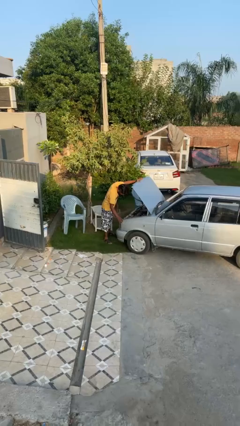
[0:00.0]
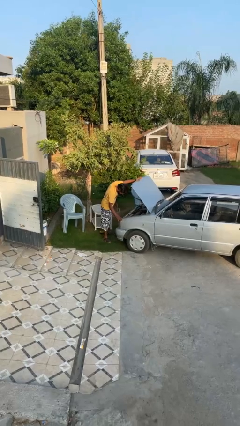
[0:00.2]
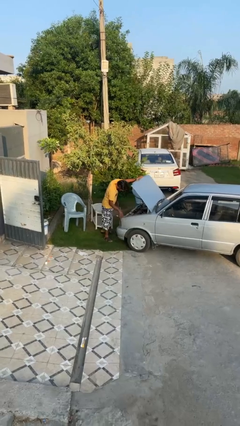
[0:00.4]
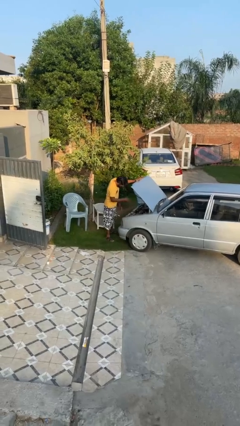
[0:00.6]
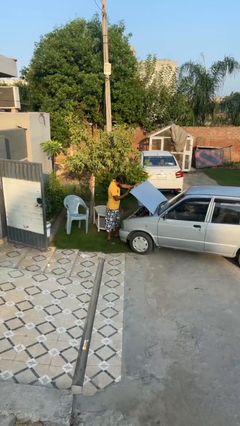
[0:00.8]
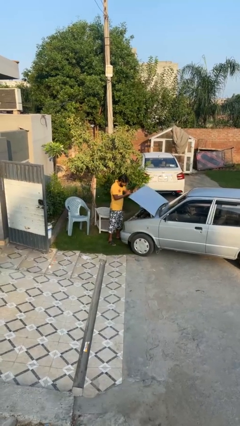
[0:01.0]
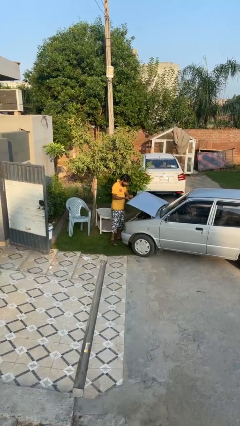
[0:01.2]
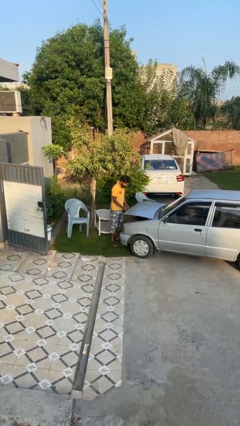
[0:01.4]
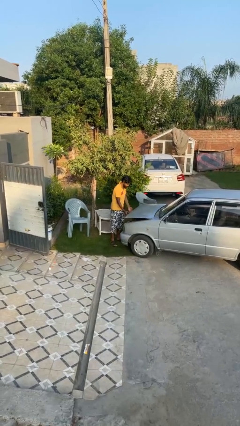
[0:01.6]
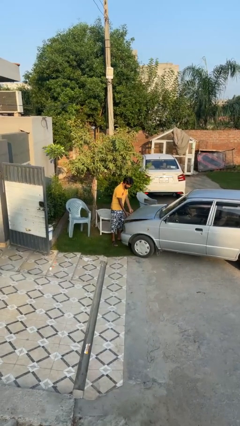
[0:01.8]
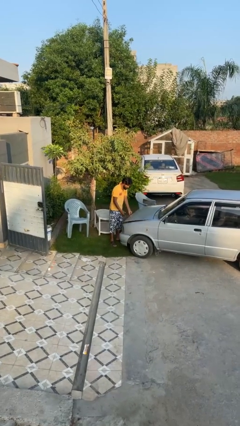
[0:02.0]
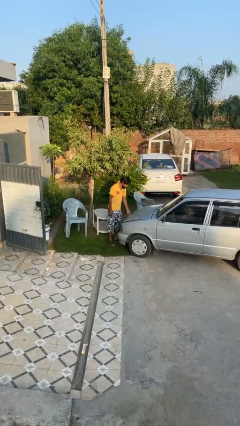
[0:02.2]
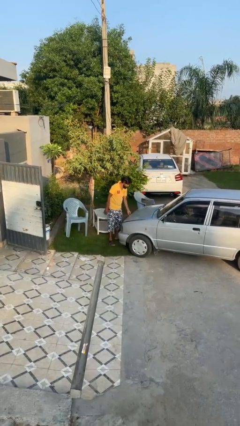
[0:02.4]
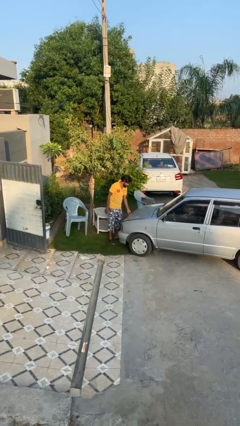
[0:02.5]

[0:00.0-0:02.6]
person closes car hood

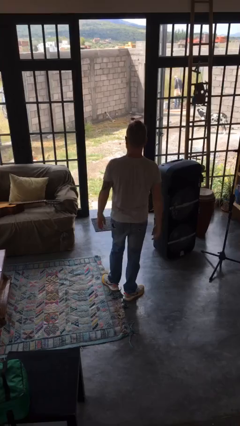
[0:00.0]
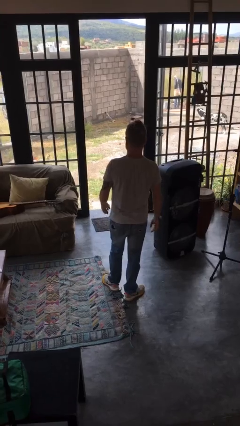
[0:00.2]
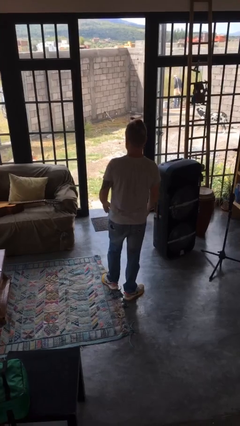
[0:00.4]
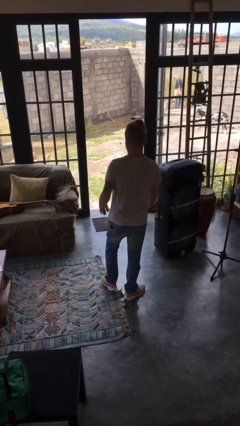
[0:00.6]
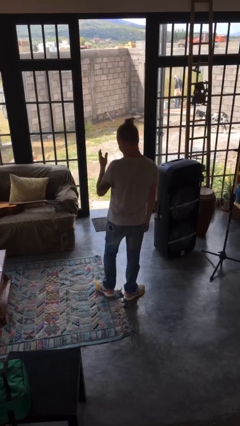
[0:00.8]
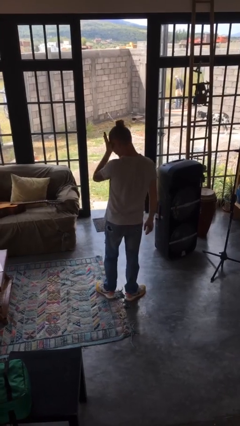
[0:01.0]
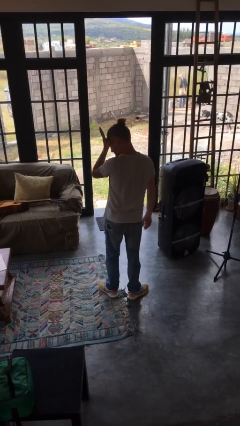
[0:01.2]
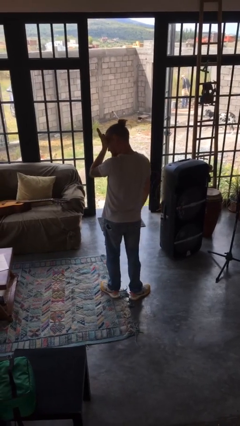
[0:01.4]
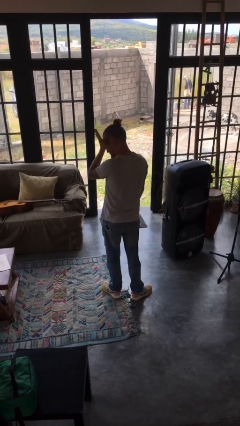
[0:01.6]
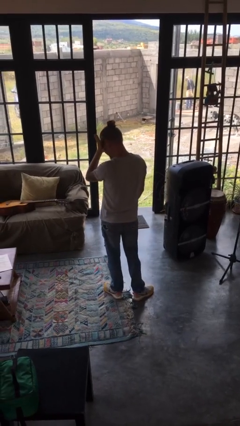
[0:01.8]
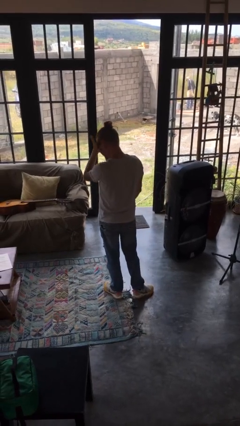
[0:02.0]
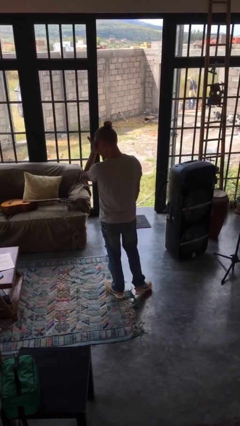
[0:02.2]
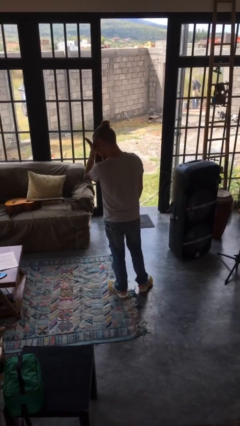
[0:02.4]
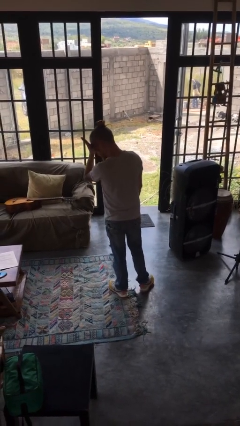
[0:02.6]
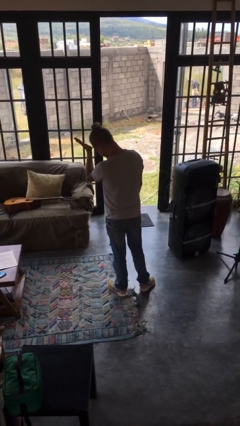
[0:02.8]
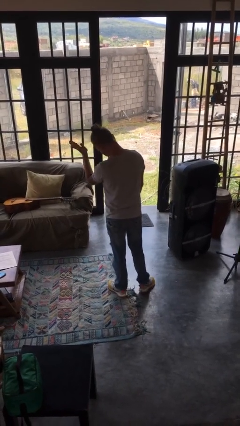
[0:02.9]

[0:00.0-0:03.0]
person rubs eyes

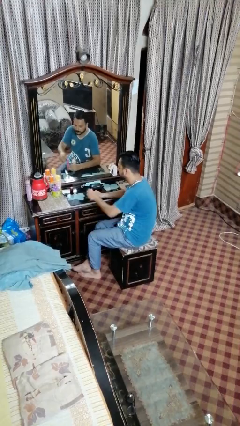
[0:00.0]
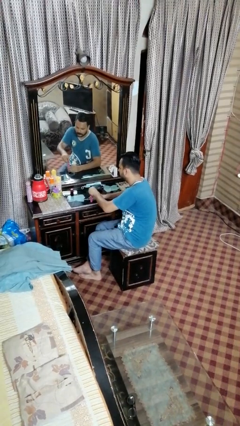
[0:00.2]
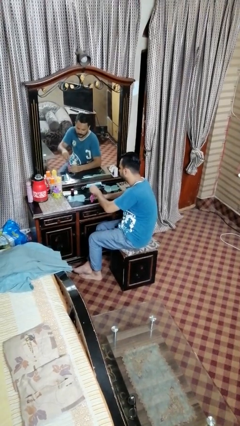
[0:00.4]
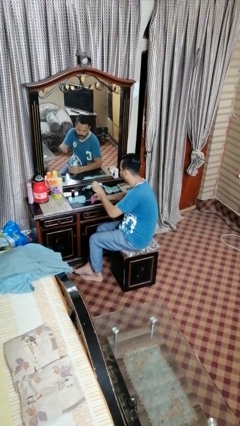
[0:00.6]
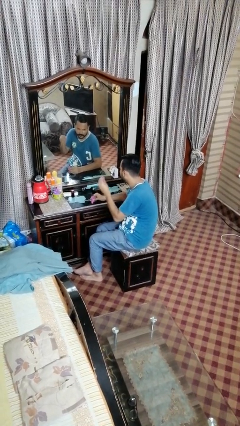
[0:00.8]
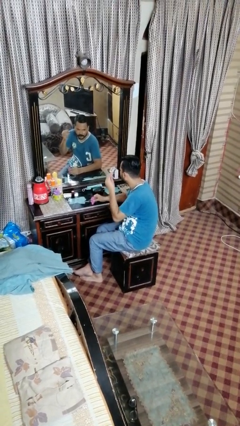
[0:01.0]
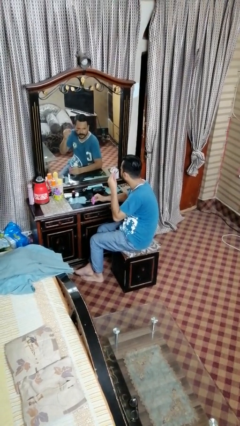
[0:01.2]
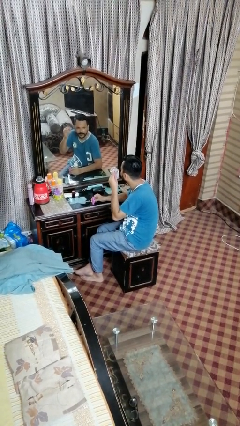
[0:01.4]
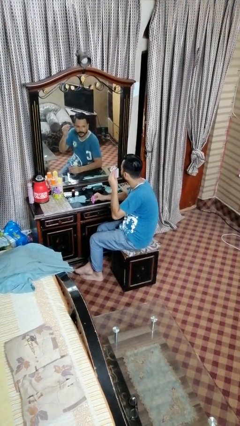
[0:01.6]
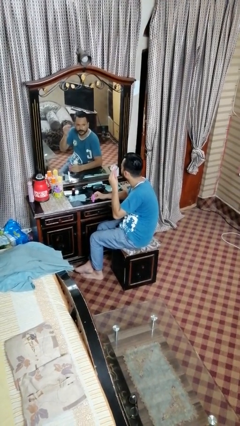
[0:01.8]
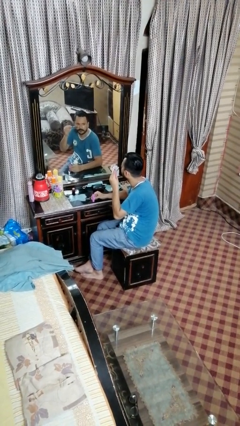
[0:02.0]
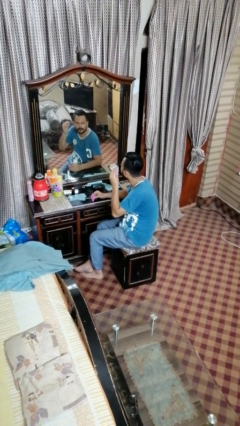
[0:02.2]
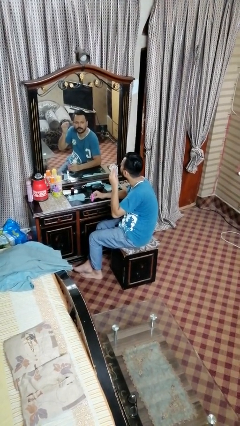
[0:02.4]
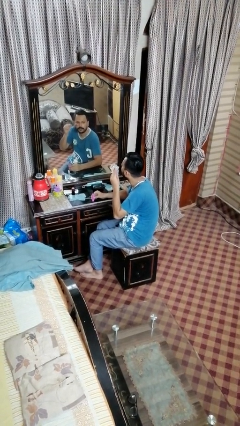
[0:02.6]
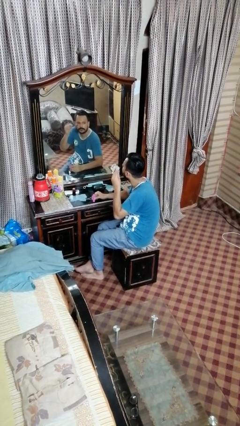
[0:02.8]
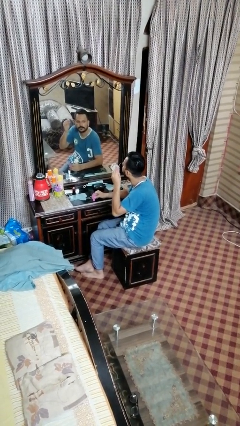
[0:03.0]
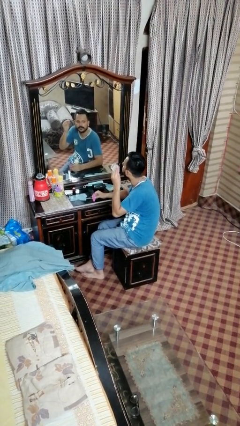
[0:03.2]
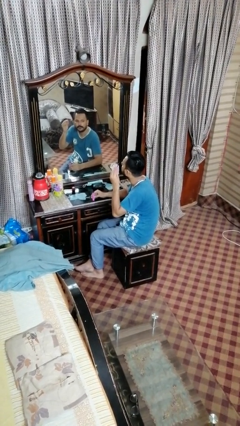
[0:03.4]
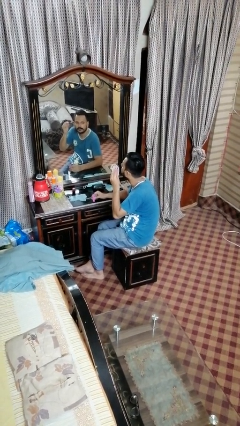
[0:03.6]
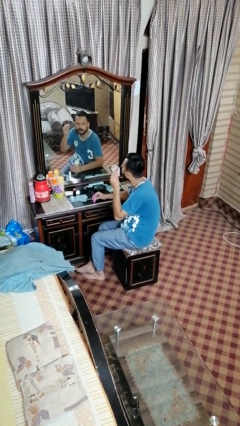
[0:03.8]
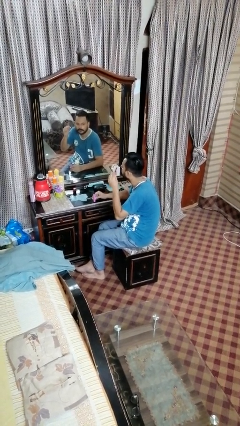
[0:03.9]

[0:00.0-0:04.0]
person applies eye makeup

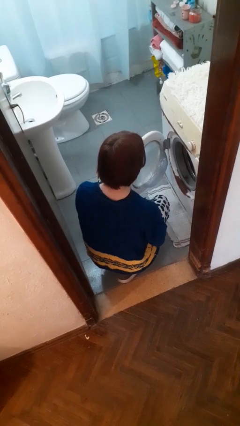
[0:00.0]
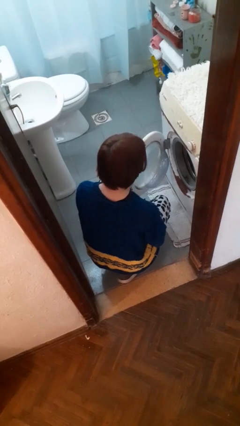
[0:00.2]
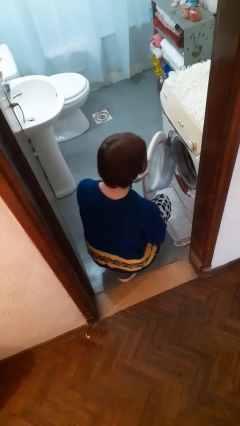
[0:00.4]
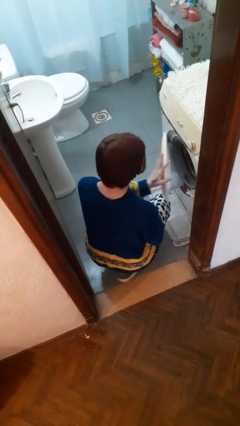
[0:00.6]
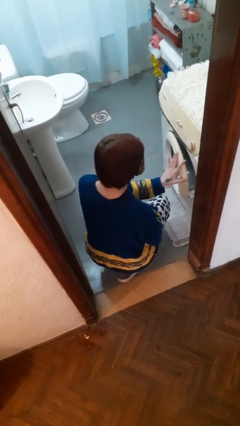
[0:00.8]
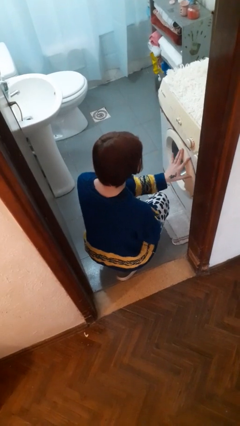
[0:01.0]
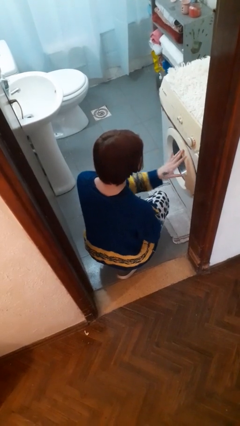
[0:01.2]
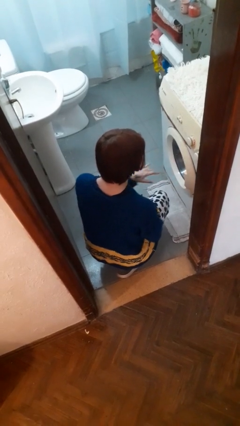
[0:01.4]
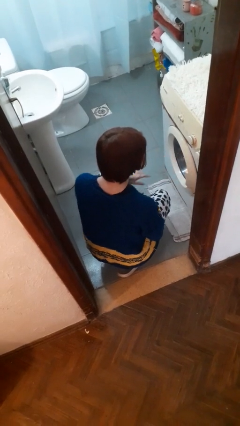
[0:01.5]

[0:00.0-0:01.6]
person closes clothes washer

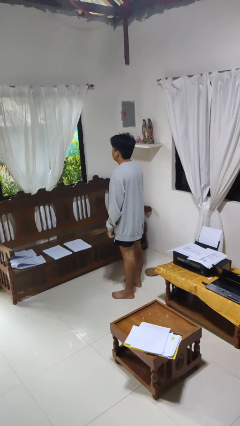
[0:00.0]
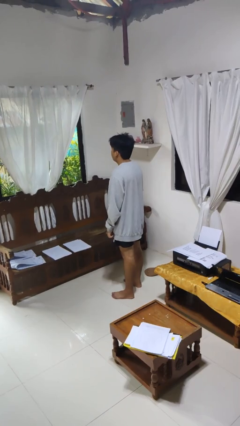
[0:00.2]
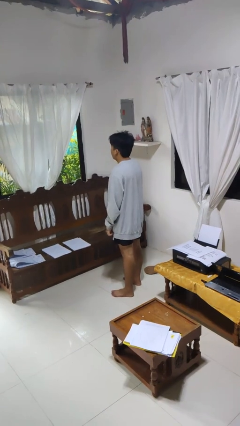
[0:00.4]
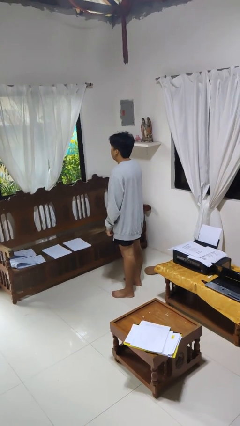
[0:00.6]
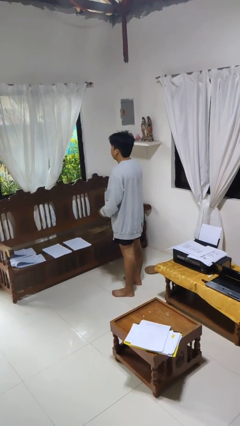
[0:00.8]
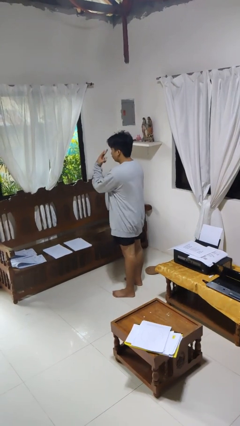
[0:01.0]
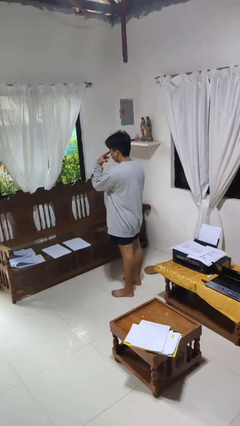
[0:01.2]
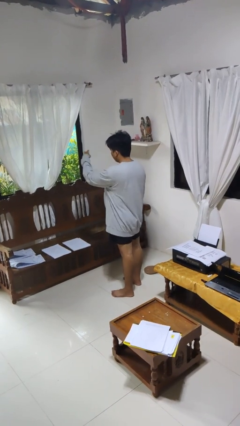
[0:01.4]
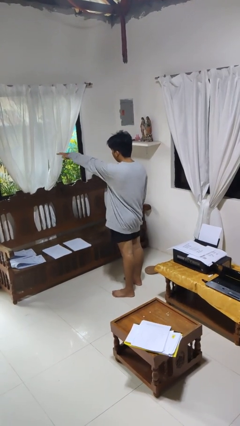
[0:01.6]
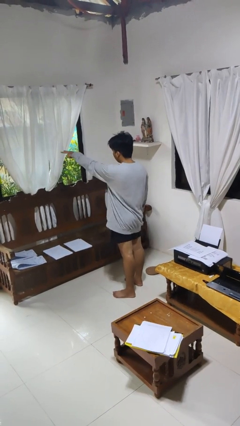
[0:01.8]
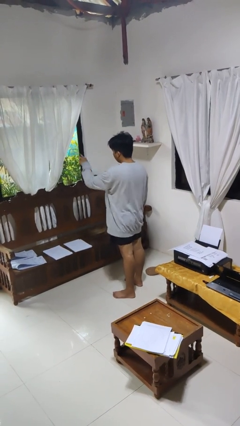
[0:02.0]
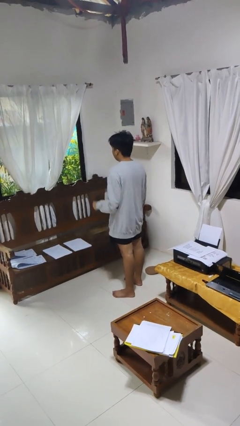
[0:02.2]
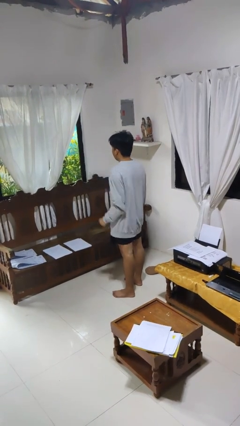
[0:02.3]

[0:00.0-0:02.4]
person gestures watch closely

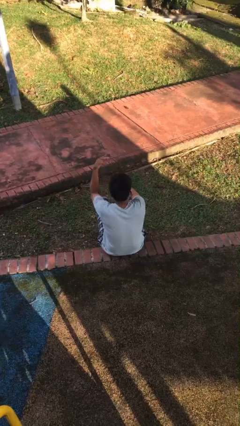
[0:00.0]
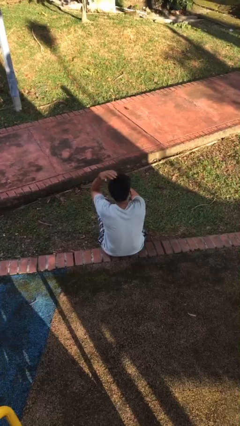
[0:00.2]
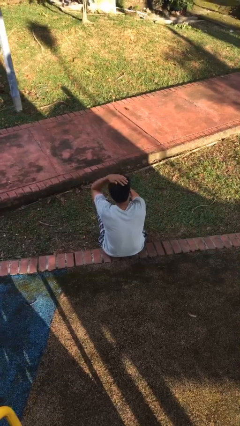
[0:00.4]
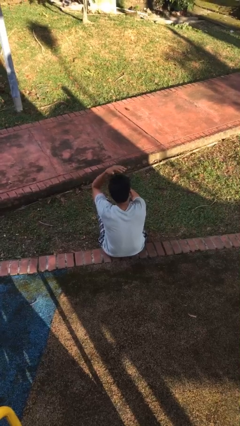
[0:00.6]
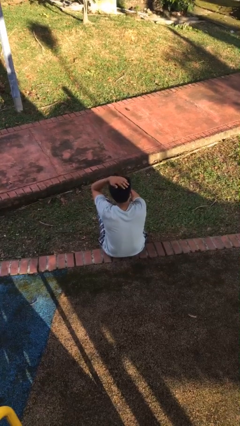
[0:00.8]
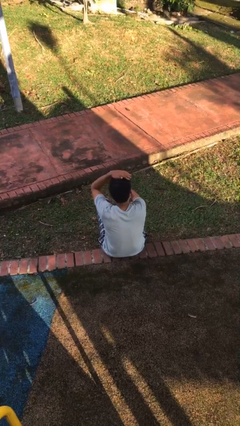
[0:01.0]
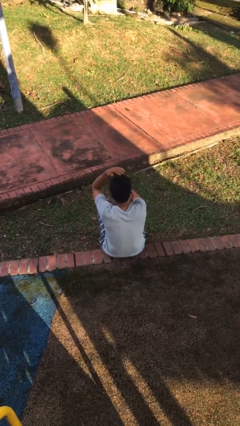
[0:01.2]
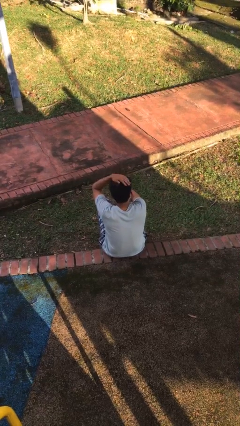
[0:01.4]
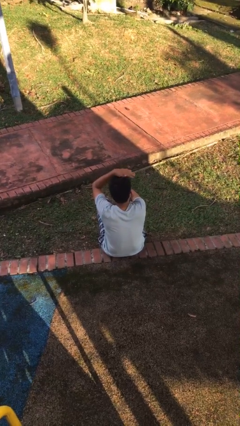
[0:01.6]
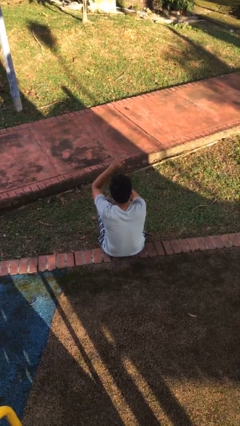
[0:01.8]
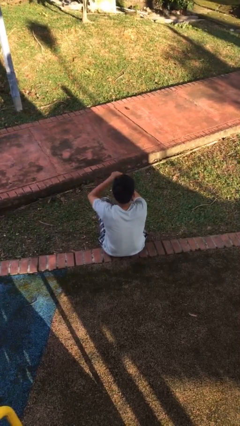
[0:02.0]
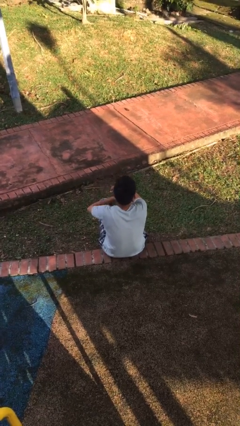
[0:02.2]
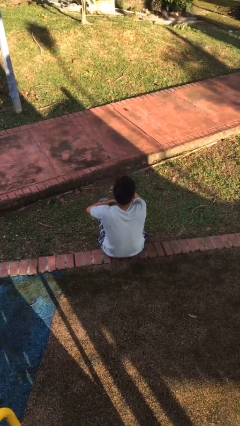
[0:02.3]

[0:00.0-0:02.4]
person pats head

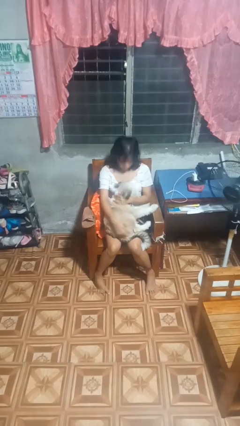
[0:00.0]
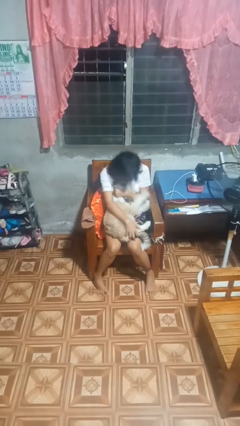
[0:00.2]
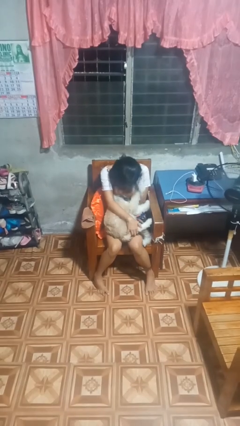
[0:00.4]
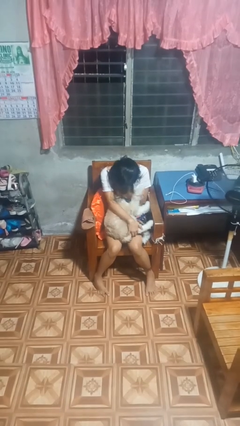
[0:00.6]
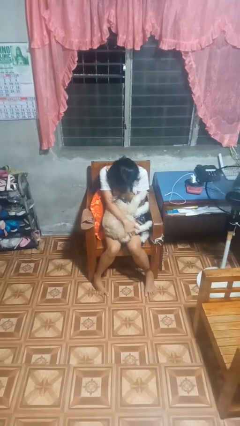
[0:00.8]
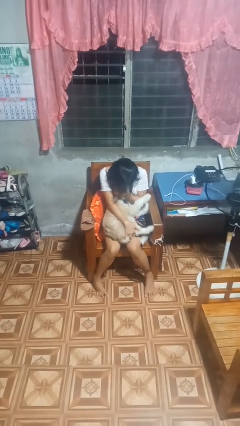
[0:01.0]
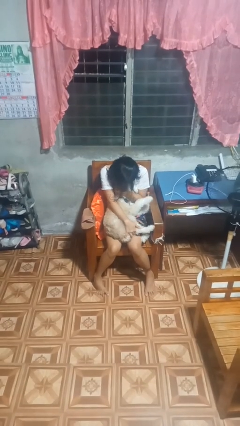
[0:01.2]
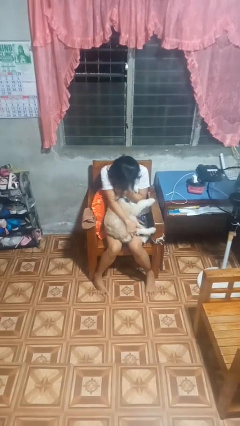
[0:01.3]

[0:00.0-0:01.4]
person hugs dog
